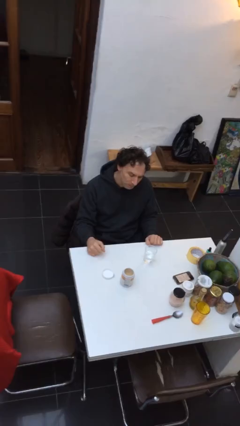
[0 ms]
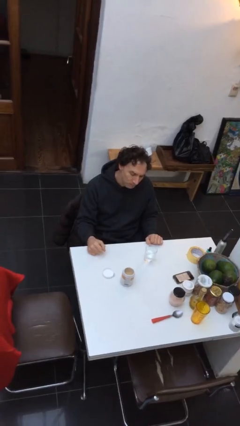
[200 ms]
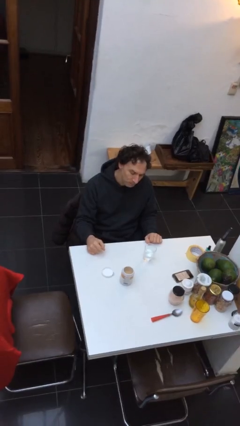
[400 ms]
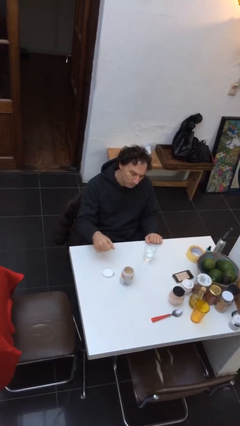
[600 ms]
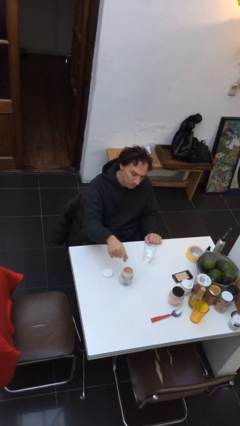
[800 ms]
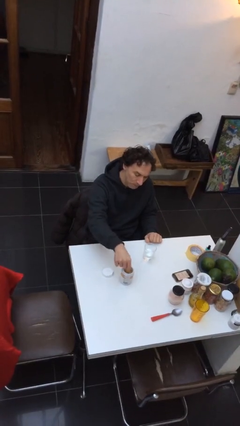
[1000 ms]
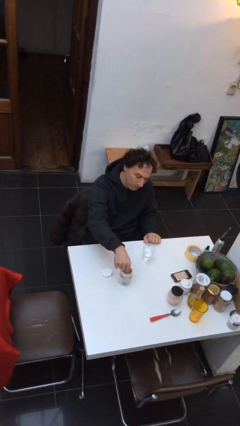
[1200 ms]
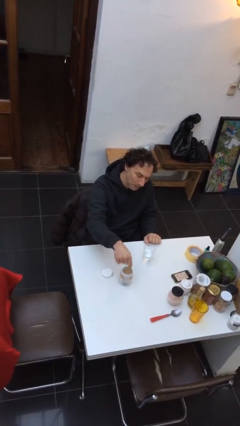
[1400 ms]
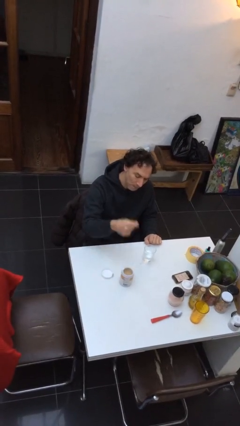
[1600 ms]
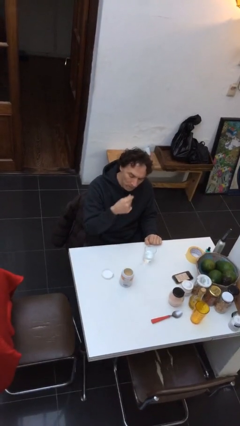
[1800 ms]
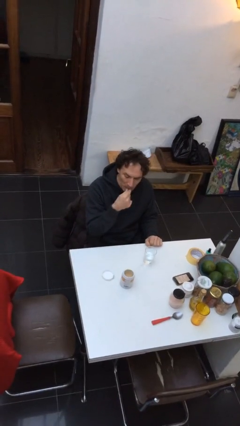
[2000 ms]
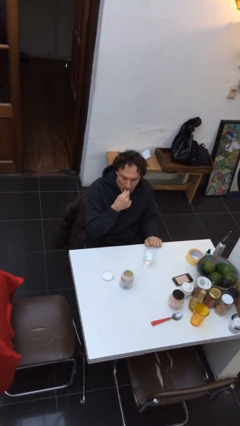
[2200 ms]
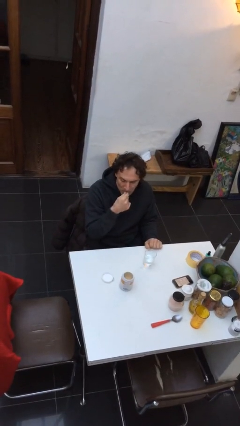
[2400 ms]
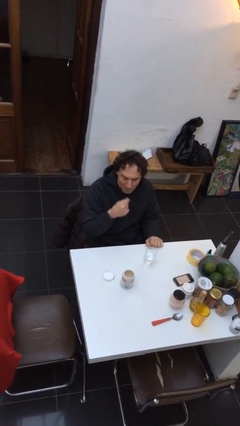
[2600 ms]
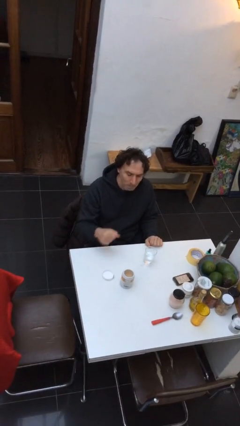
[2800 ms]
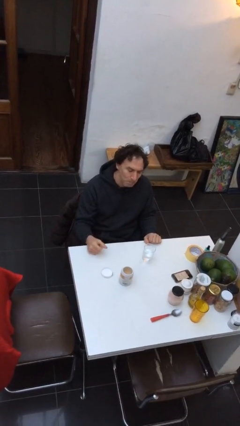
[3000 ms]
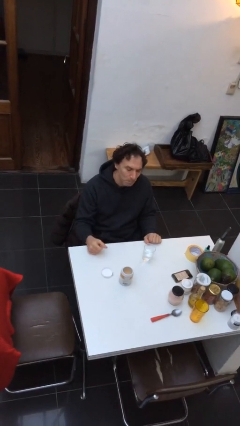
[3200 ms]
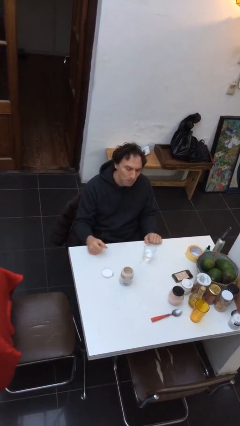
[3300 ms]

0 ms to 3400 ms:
person takes medicine pills

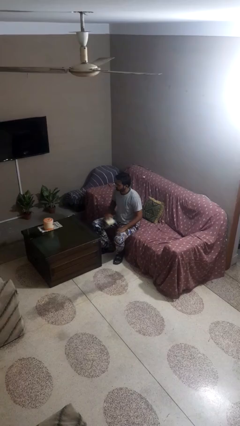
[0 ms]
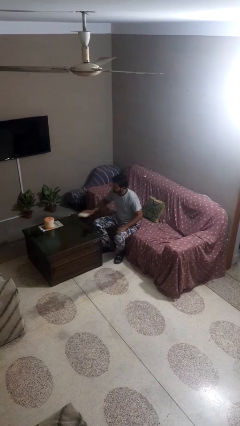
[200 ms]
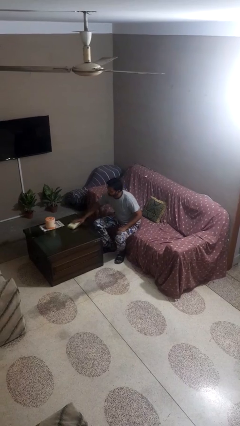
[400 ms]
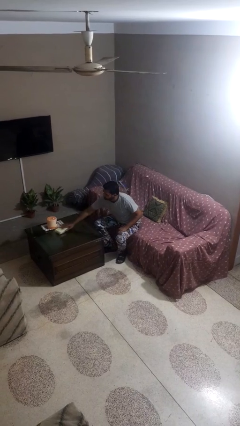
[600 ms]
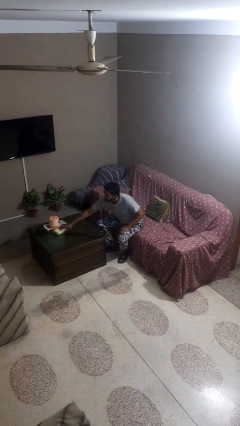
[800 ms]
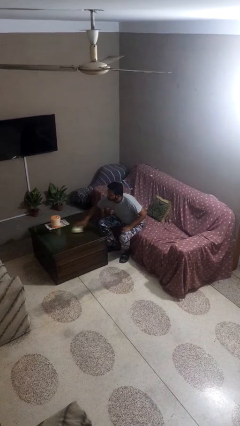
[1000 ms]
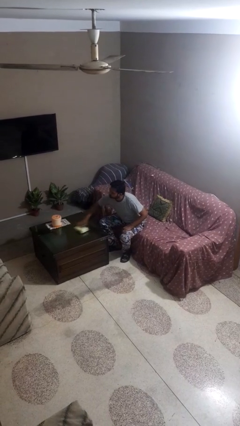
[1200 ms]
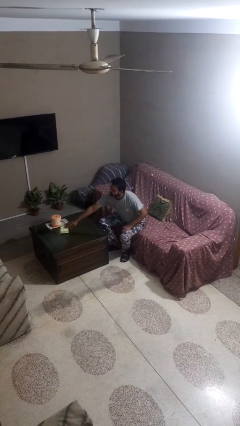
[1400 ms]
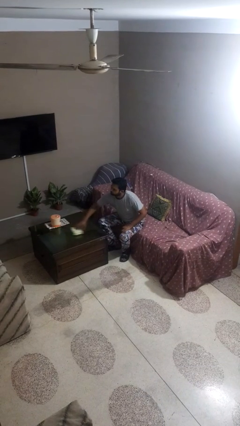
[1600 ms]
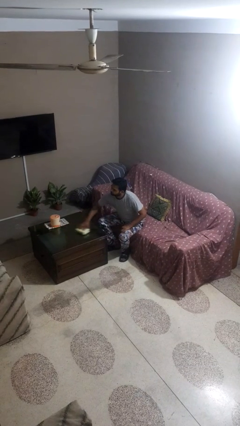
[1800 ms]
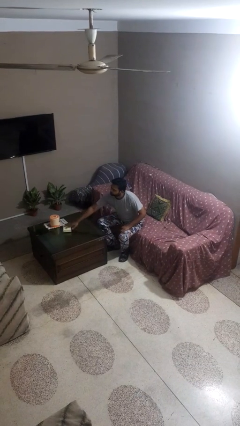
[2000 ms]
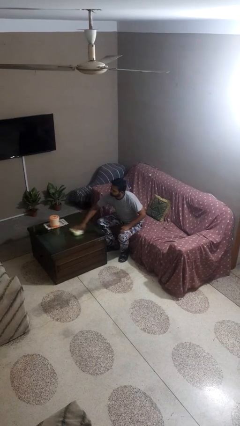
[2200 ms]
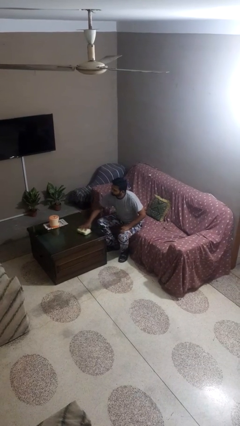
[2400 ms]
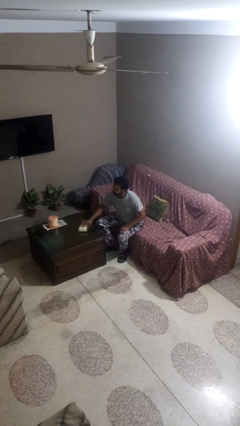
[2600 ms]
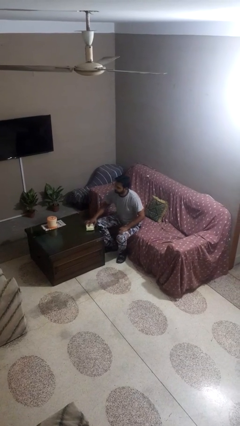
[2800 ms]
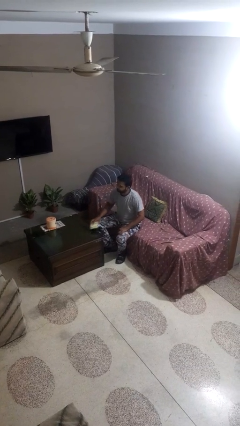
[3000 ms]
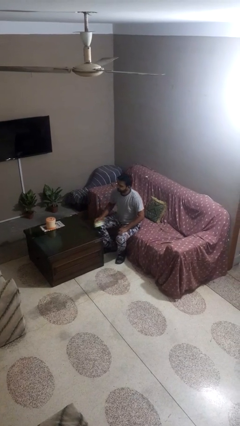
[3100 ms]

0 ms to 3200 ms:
person dusts furniture

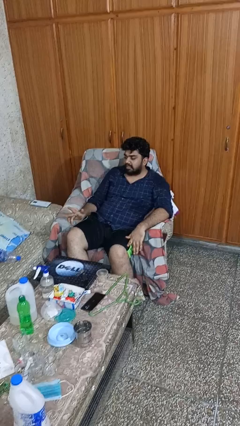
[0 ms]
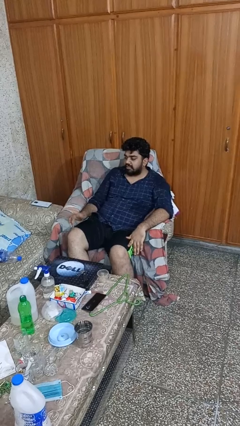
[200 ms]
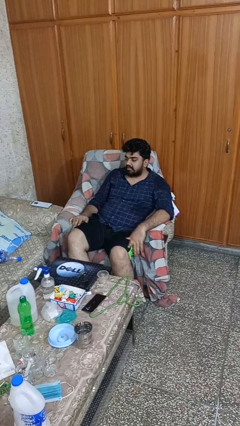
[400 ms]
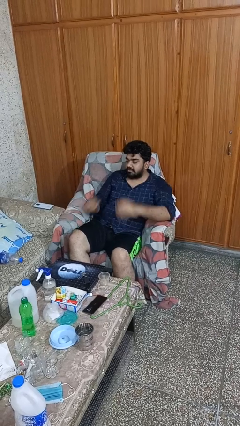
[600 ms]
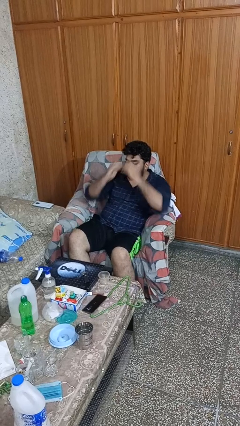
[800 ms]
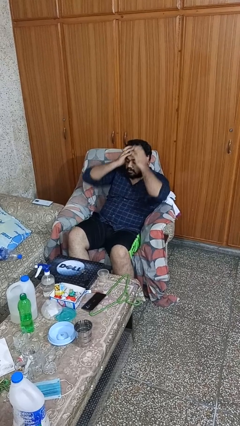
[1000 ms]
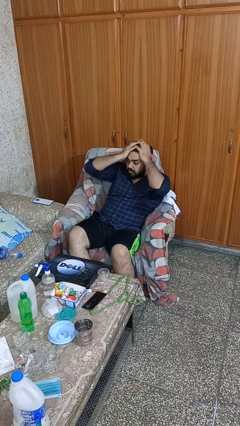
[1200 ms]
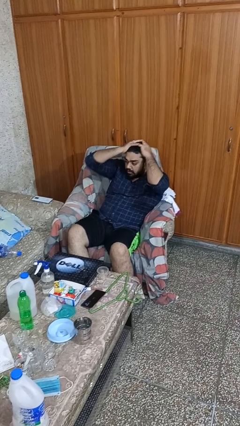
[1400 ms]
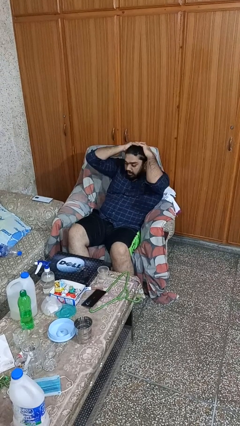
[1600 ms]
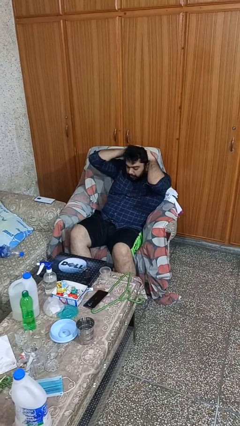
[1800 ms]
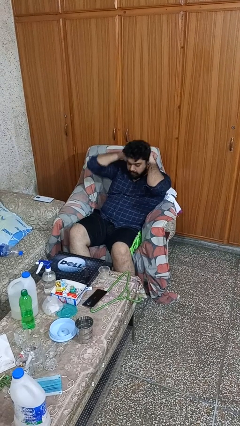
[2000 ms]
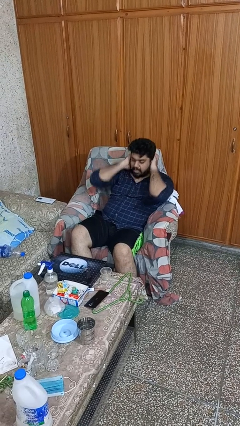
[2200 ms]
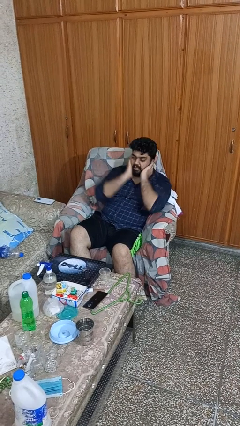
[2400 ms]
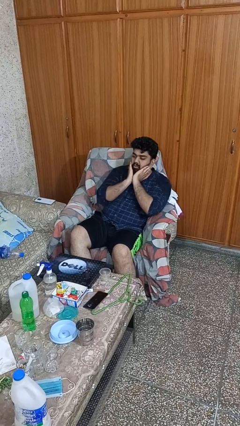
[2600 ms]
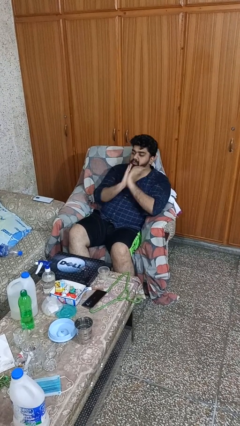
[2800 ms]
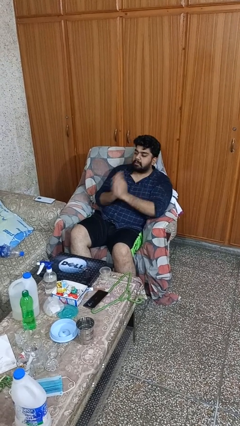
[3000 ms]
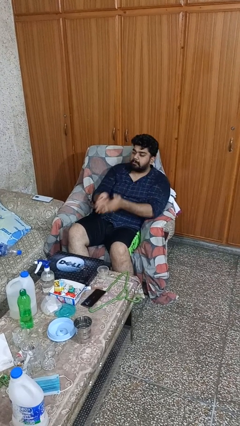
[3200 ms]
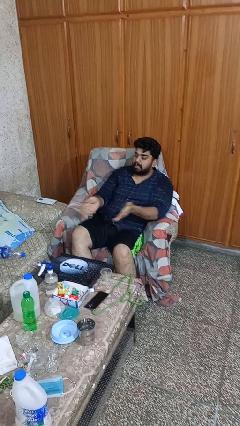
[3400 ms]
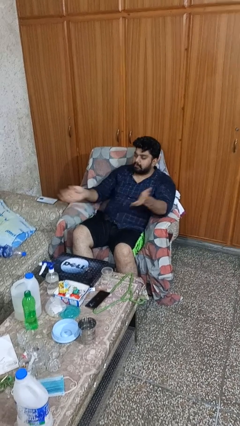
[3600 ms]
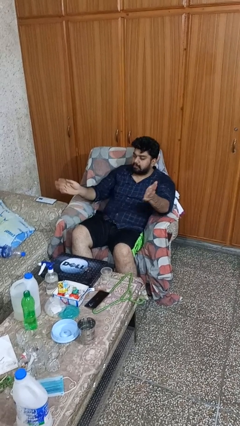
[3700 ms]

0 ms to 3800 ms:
person scratches face

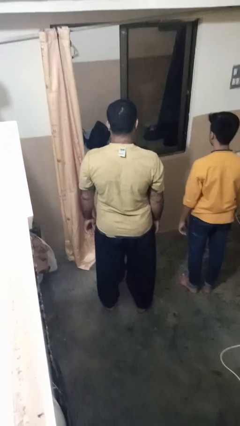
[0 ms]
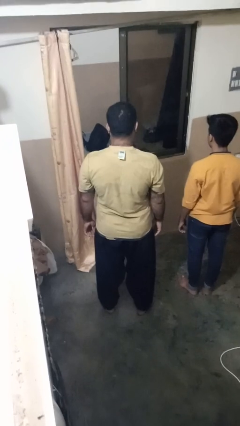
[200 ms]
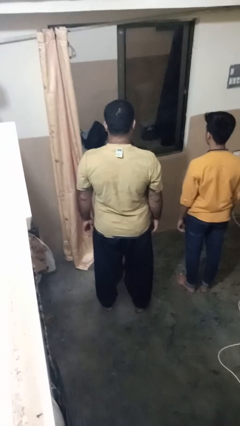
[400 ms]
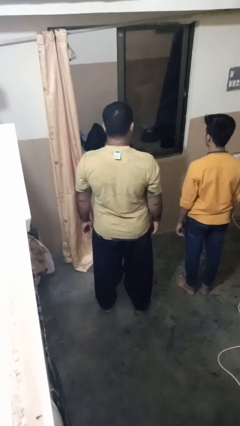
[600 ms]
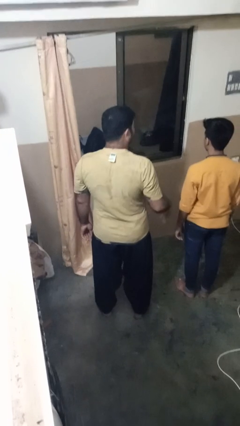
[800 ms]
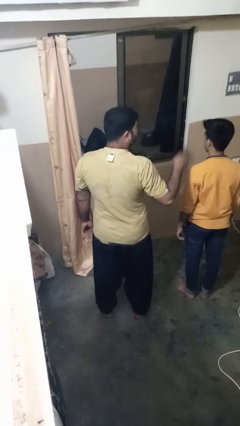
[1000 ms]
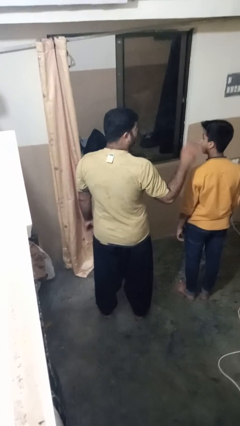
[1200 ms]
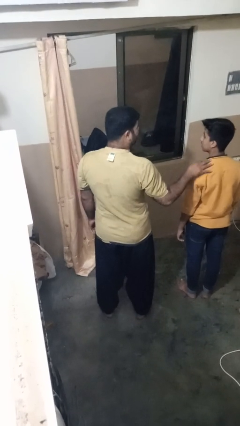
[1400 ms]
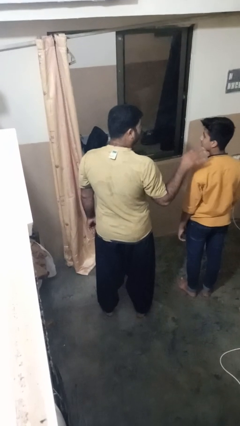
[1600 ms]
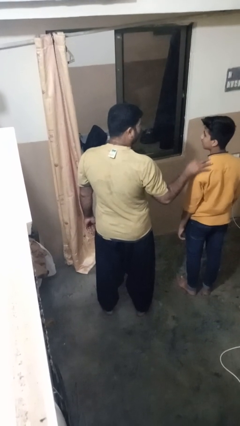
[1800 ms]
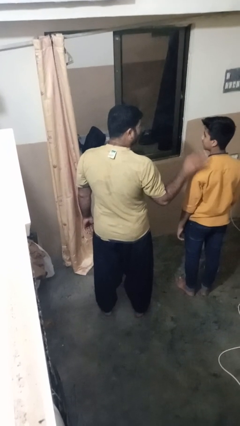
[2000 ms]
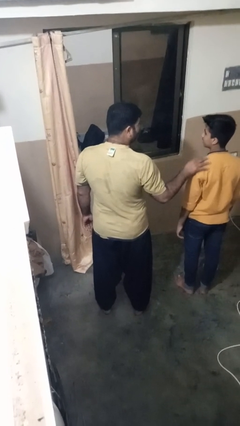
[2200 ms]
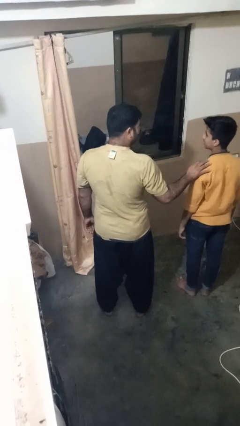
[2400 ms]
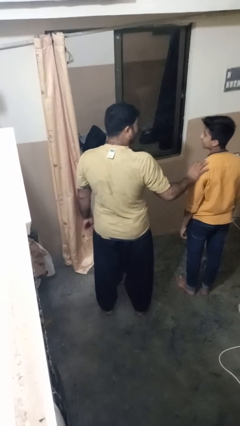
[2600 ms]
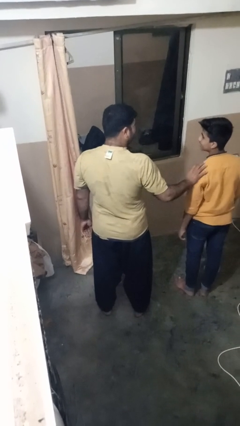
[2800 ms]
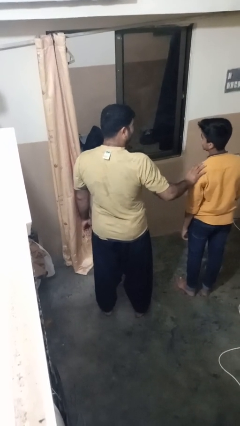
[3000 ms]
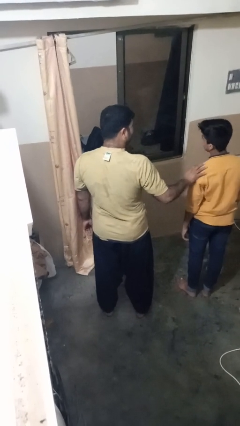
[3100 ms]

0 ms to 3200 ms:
person pounds shoulders of person

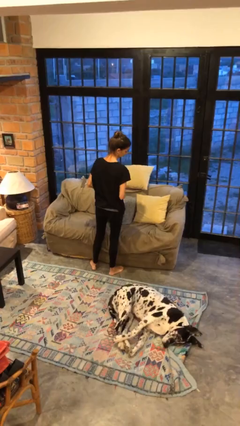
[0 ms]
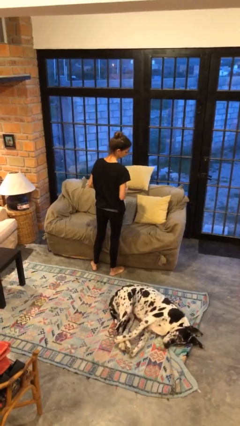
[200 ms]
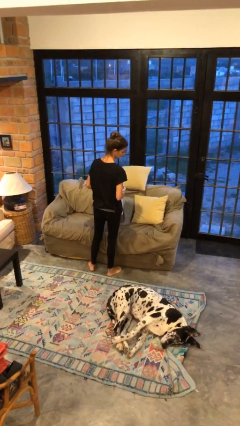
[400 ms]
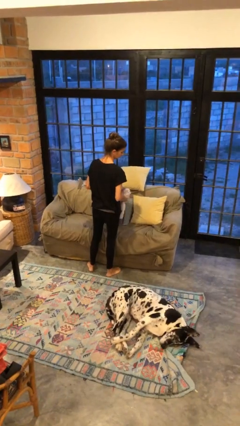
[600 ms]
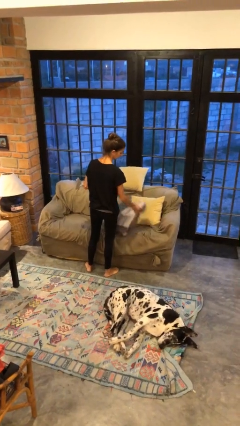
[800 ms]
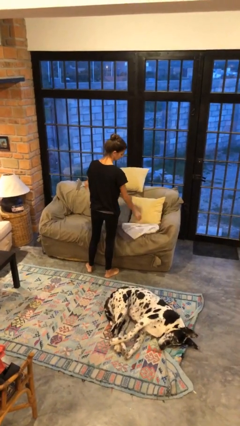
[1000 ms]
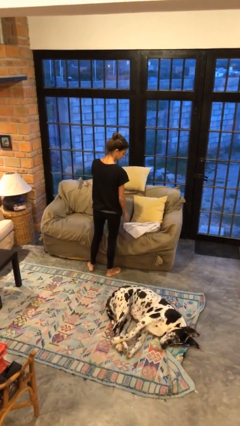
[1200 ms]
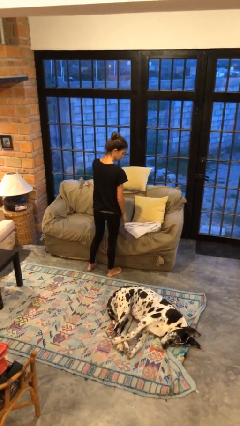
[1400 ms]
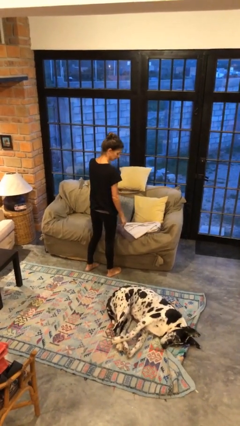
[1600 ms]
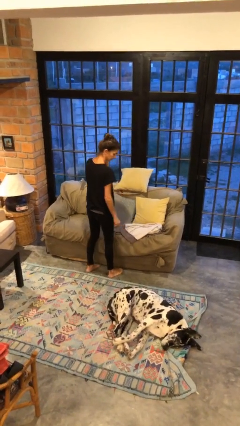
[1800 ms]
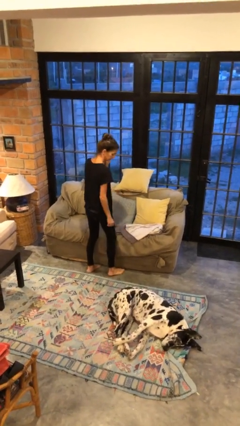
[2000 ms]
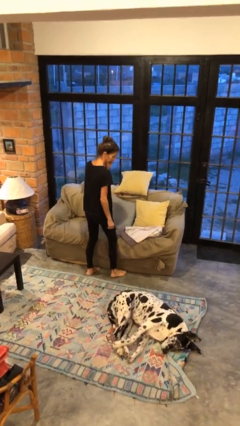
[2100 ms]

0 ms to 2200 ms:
person puts down object on couch

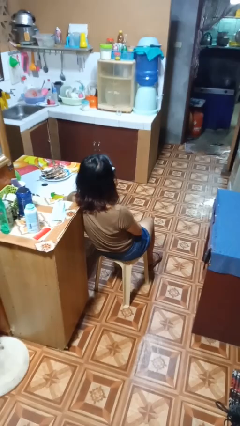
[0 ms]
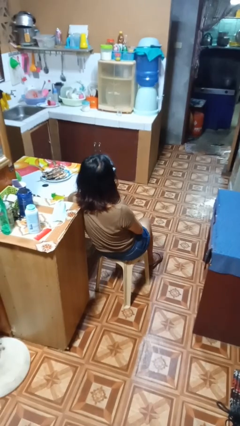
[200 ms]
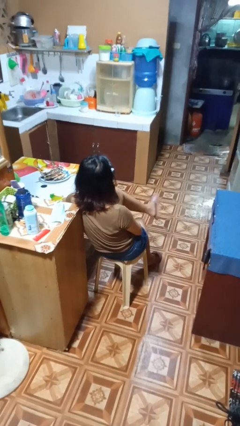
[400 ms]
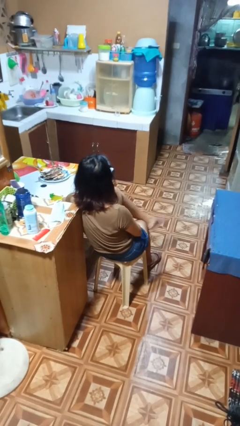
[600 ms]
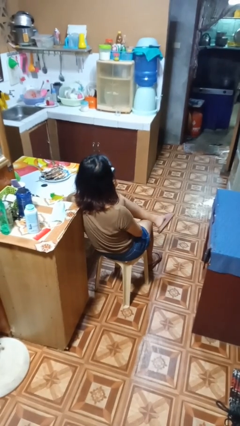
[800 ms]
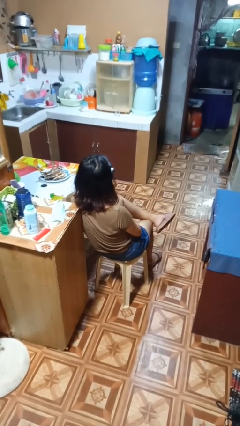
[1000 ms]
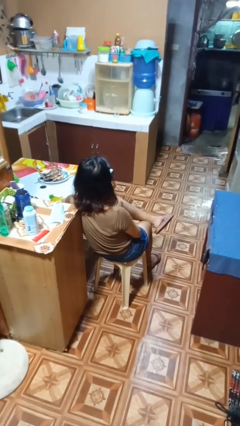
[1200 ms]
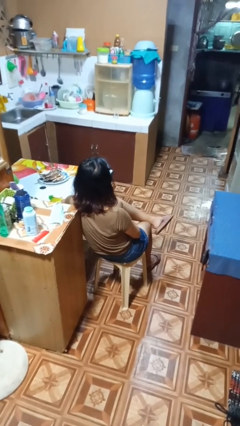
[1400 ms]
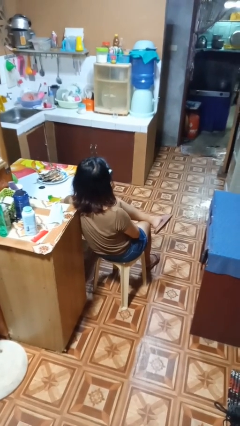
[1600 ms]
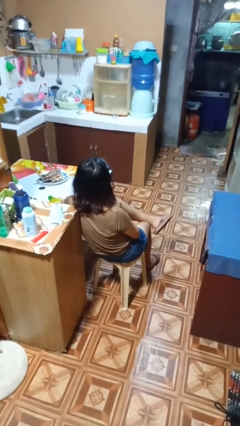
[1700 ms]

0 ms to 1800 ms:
person crosses legs

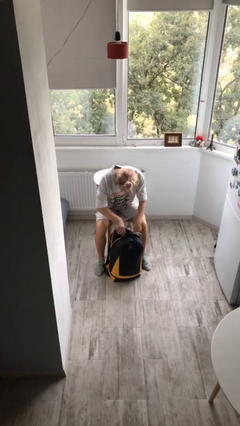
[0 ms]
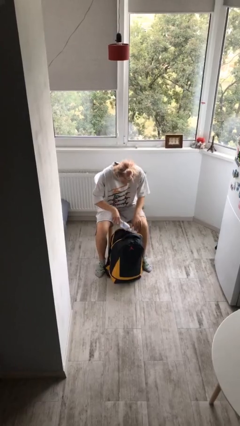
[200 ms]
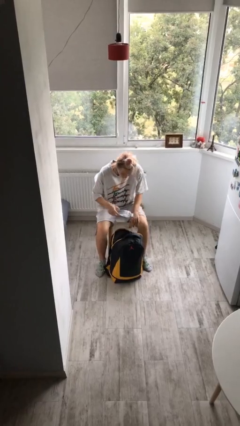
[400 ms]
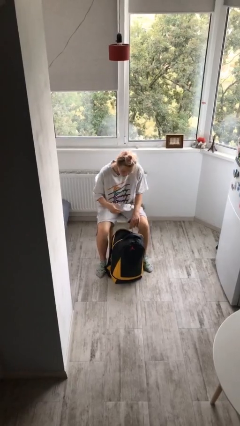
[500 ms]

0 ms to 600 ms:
person takes object from backpack
